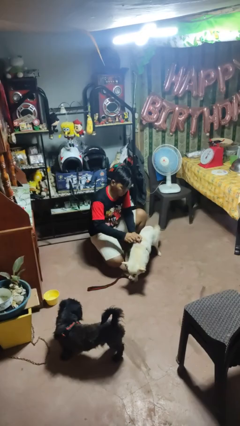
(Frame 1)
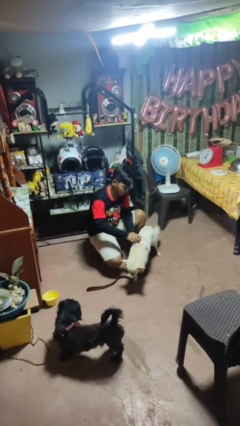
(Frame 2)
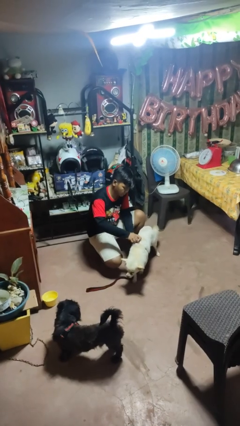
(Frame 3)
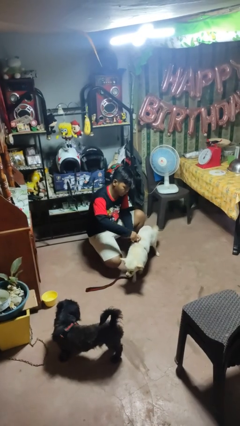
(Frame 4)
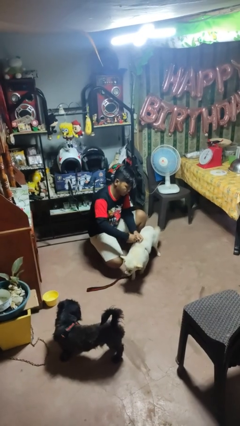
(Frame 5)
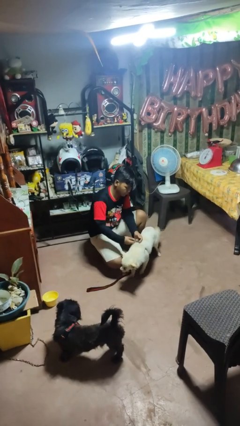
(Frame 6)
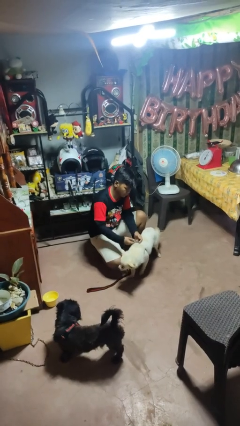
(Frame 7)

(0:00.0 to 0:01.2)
person attaches leash to dog

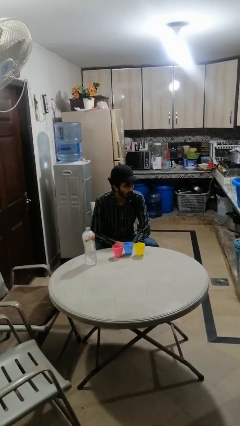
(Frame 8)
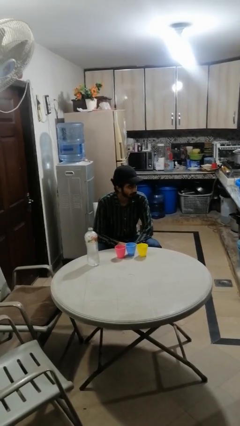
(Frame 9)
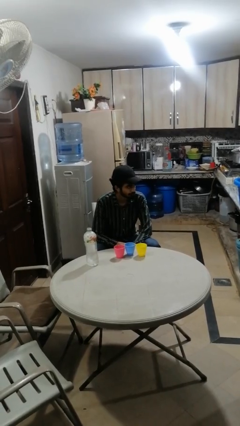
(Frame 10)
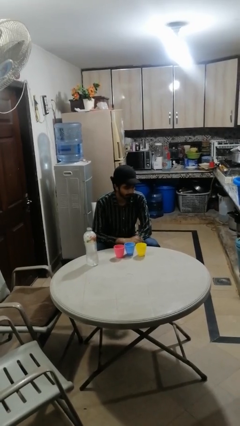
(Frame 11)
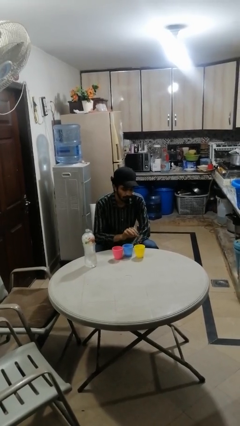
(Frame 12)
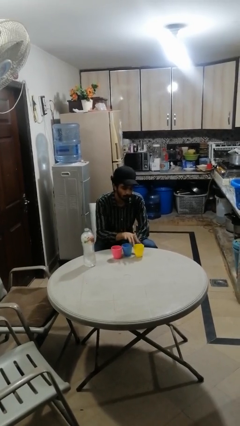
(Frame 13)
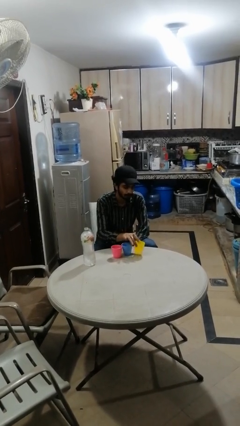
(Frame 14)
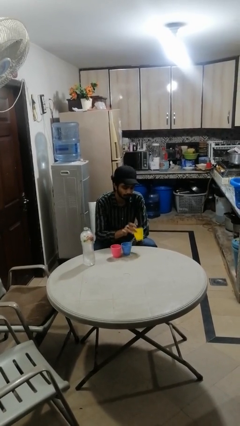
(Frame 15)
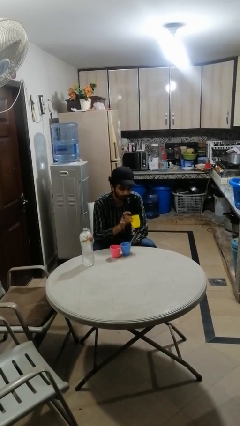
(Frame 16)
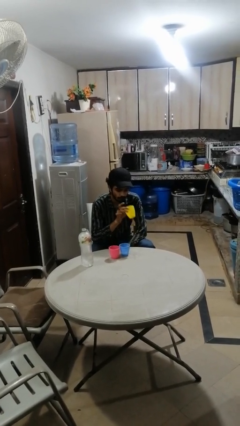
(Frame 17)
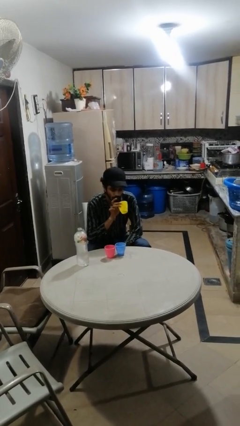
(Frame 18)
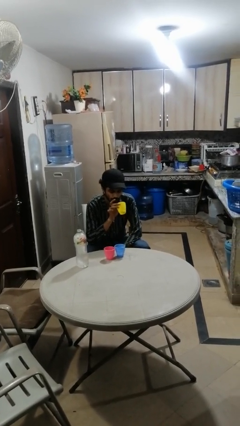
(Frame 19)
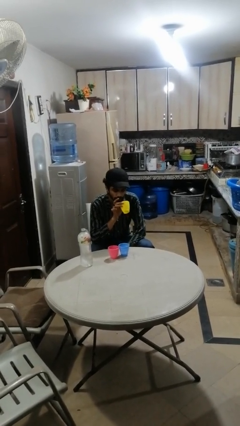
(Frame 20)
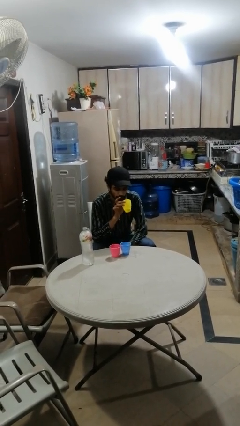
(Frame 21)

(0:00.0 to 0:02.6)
person picks up object from table

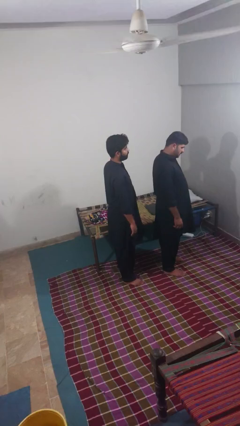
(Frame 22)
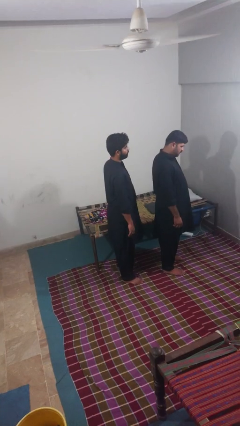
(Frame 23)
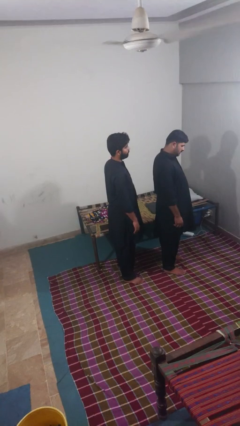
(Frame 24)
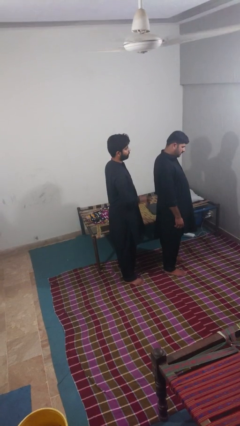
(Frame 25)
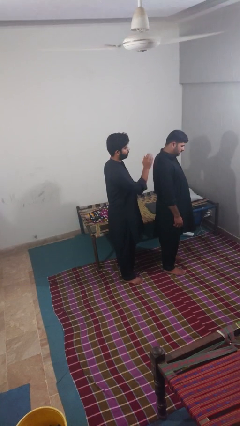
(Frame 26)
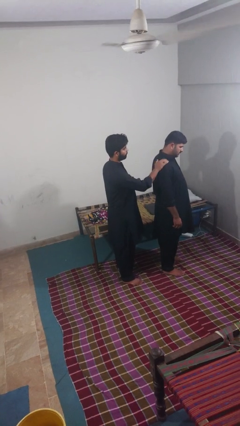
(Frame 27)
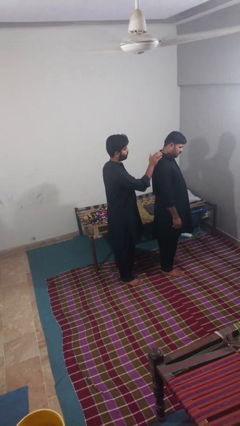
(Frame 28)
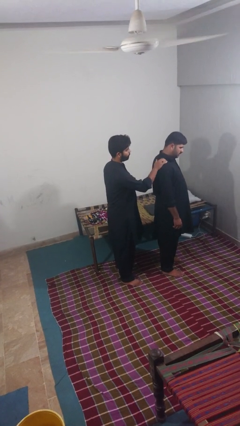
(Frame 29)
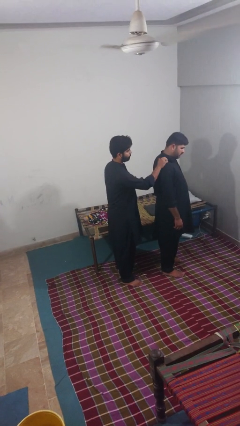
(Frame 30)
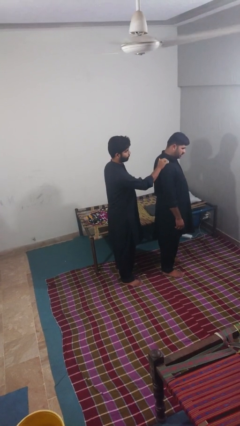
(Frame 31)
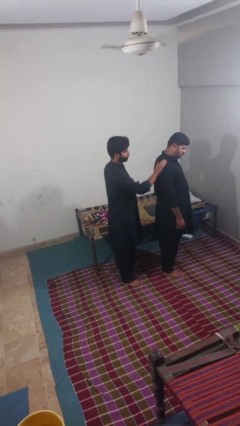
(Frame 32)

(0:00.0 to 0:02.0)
person touches back of person

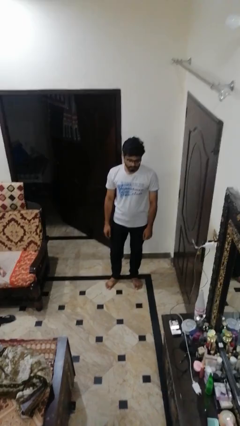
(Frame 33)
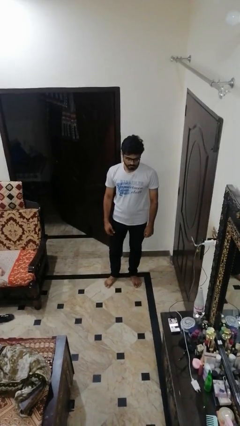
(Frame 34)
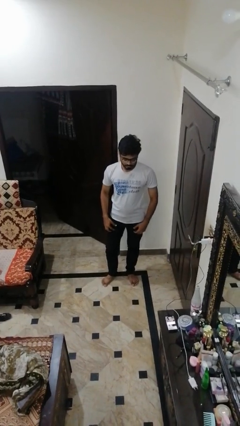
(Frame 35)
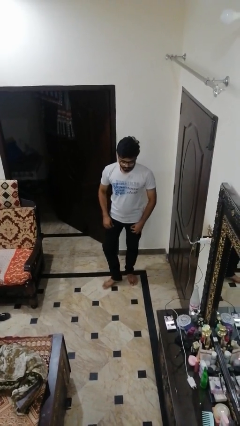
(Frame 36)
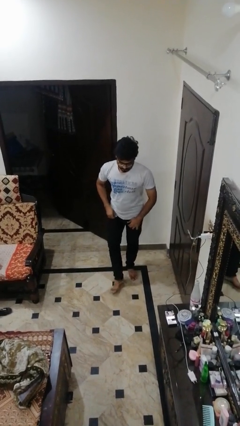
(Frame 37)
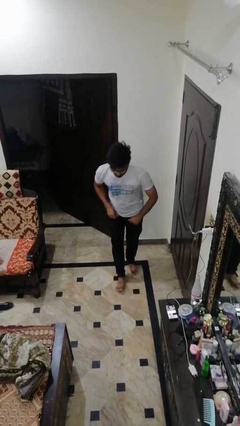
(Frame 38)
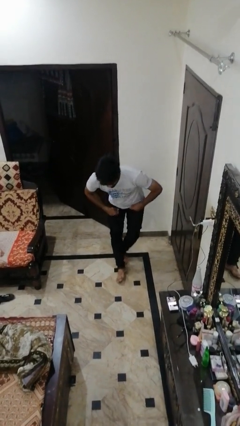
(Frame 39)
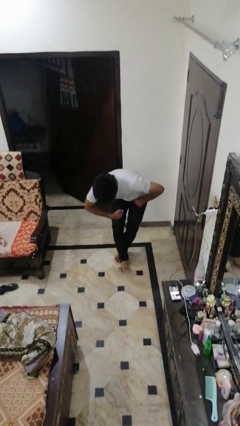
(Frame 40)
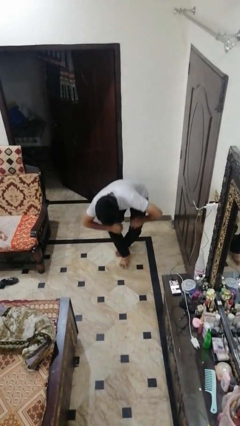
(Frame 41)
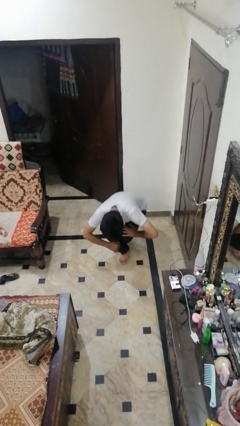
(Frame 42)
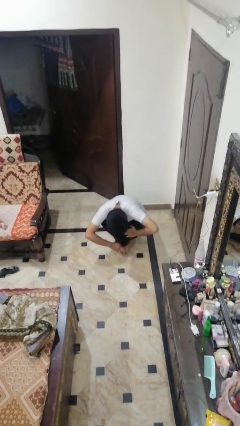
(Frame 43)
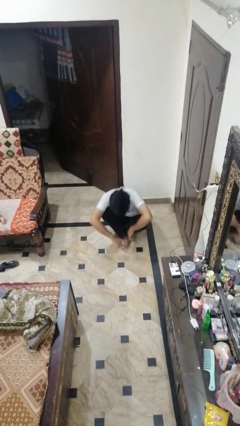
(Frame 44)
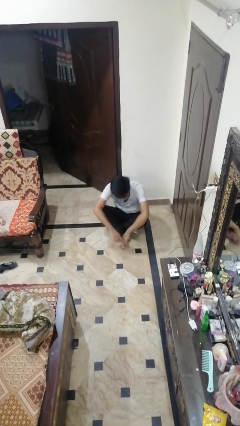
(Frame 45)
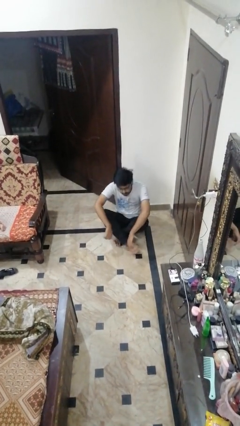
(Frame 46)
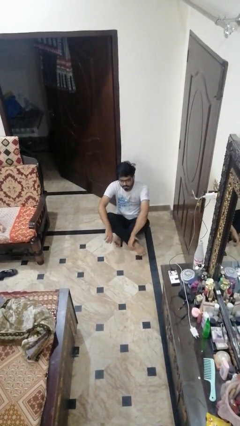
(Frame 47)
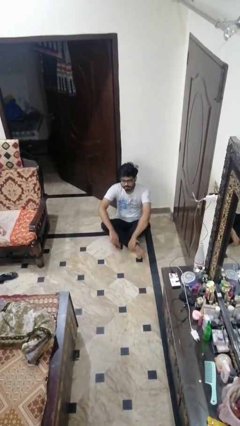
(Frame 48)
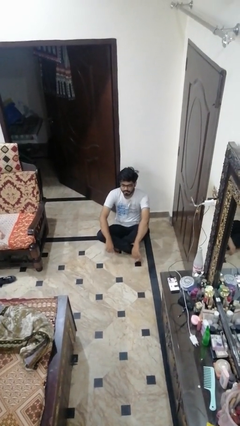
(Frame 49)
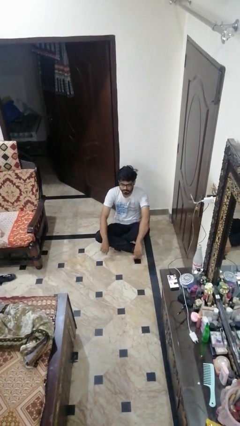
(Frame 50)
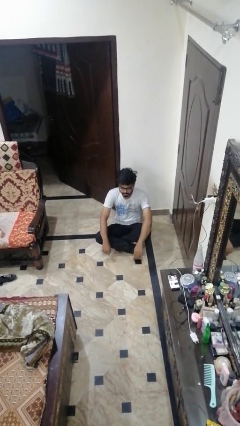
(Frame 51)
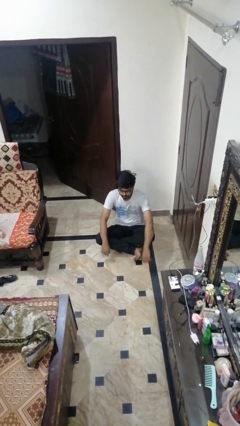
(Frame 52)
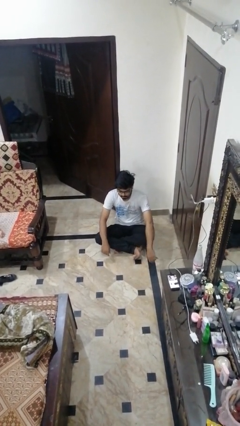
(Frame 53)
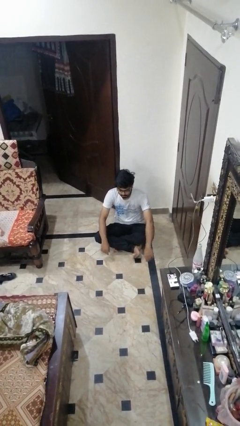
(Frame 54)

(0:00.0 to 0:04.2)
person sits crisscross

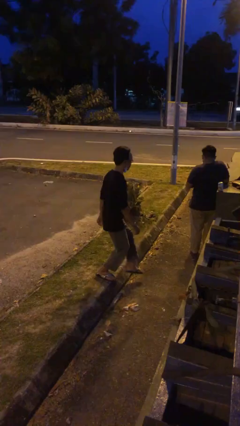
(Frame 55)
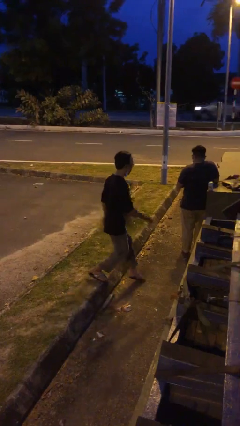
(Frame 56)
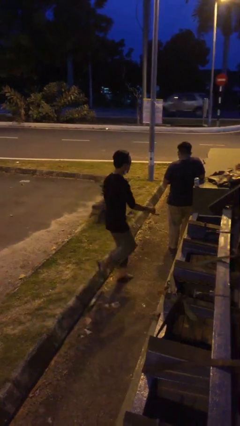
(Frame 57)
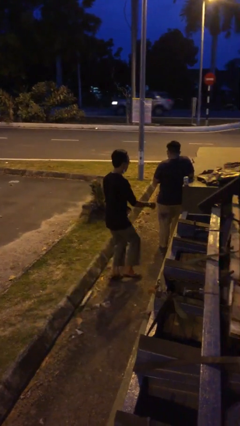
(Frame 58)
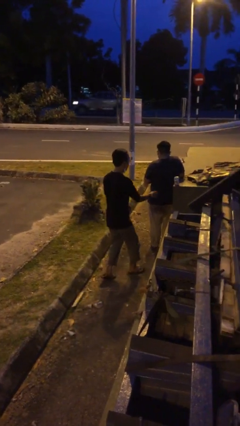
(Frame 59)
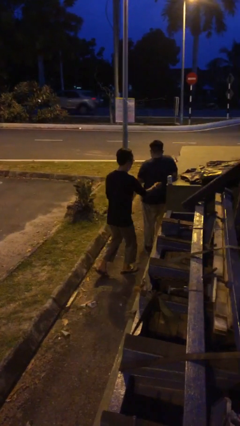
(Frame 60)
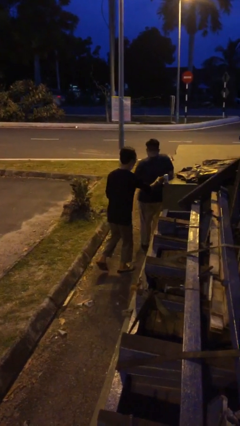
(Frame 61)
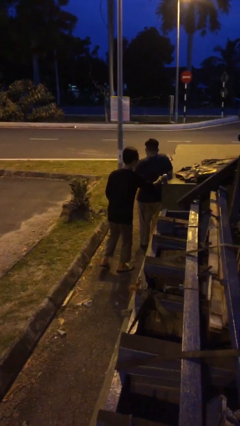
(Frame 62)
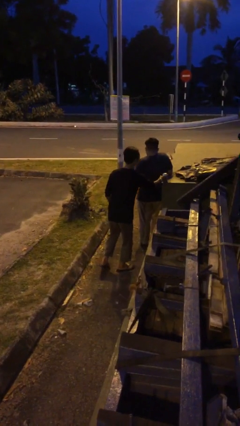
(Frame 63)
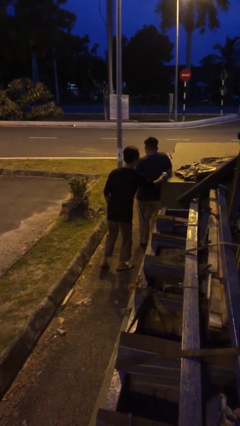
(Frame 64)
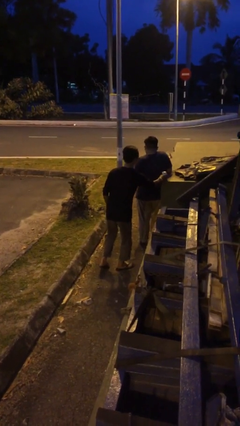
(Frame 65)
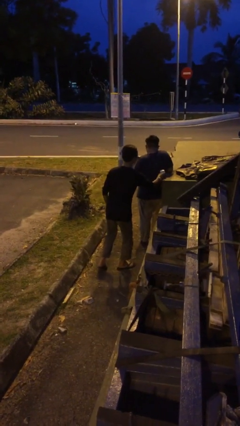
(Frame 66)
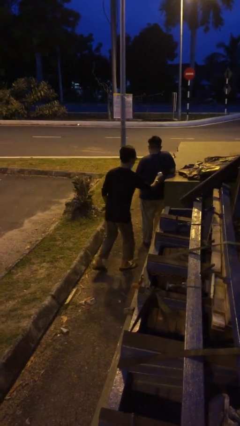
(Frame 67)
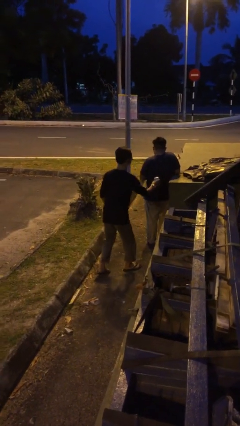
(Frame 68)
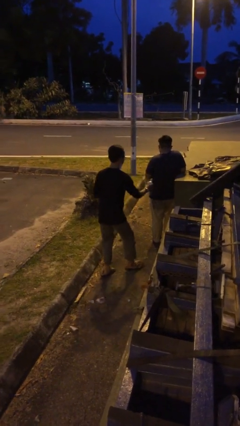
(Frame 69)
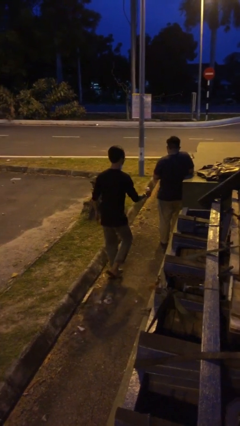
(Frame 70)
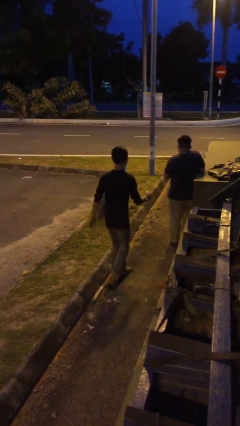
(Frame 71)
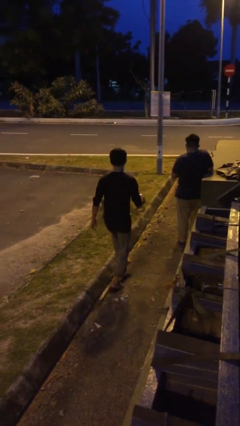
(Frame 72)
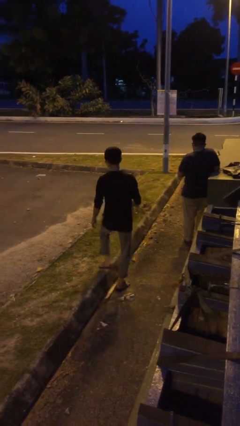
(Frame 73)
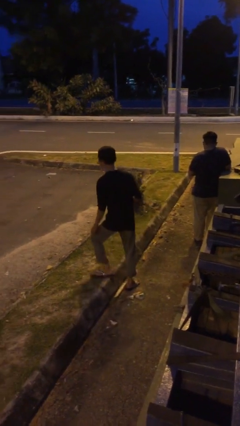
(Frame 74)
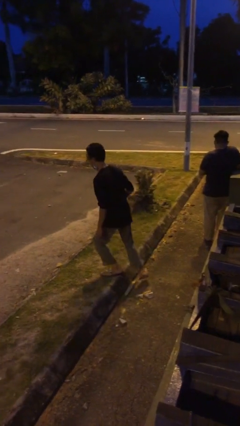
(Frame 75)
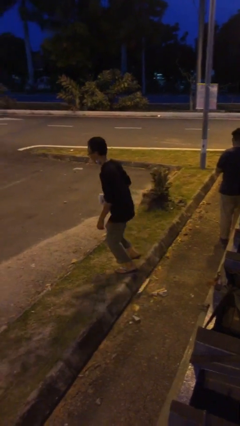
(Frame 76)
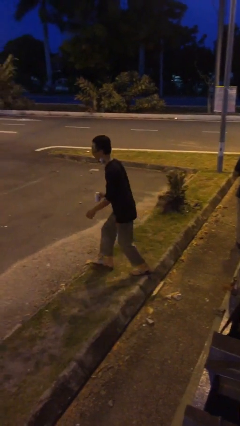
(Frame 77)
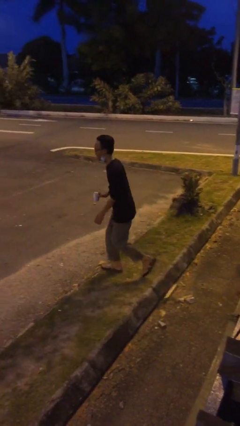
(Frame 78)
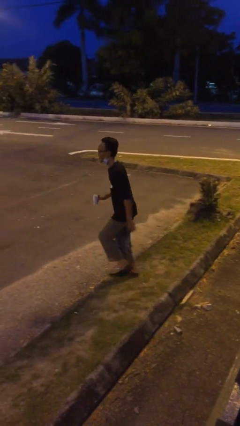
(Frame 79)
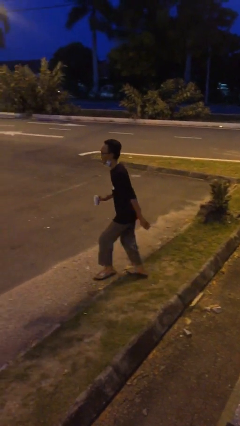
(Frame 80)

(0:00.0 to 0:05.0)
person steals object from person

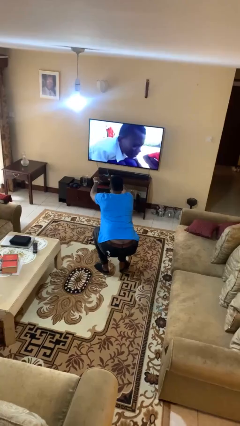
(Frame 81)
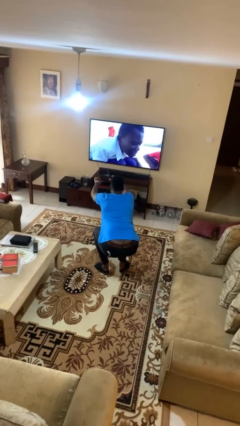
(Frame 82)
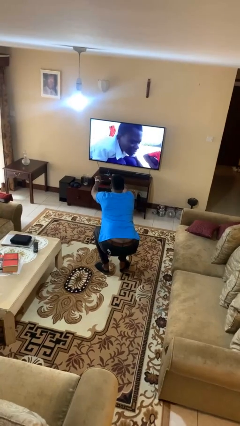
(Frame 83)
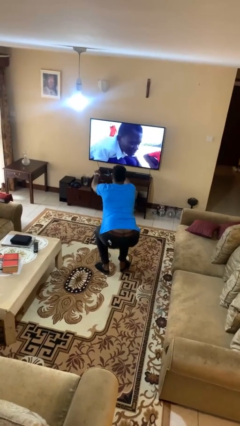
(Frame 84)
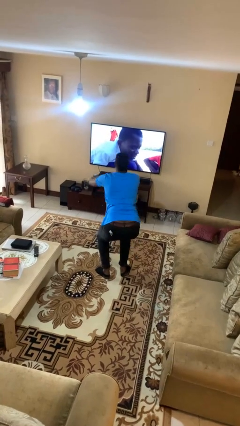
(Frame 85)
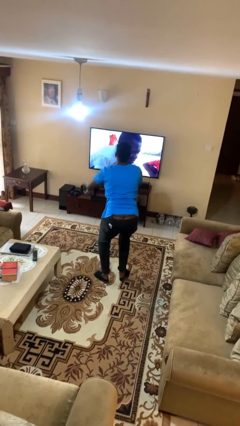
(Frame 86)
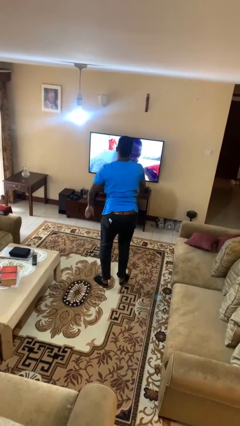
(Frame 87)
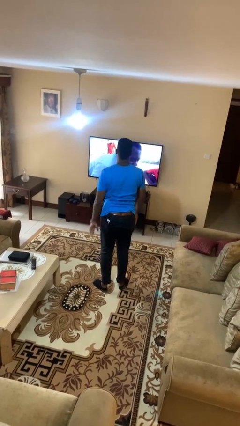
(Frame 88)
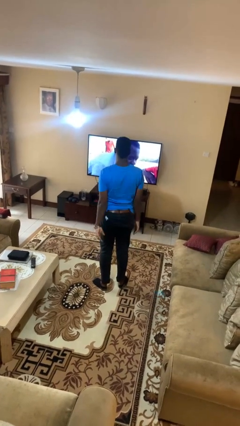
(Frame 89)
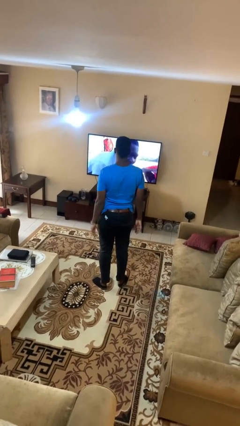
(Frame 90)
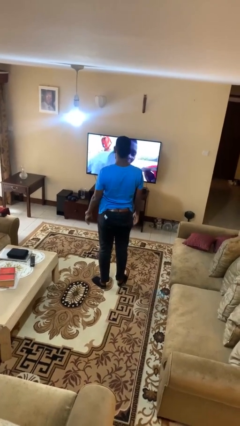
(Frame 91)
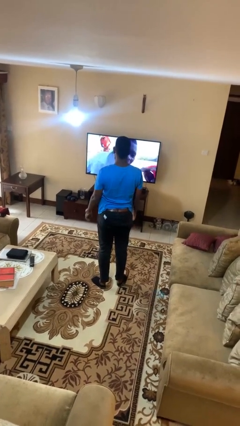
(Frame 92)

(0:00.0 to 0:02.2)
person stands up
